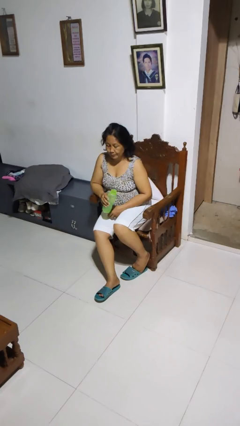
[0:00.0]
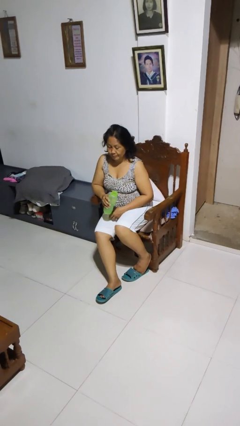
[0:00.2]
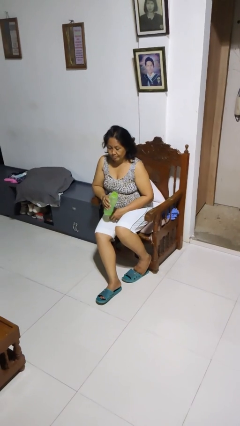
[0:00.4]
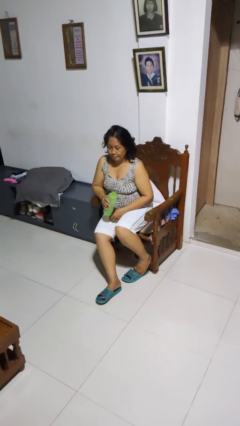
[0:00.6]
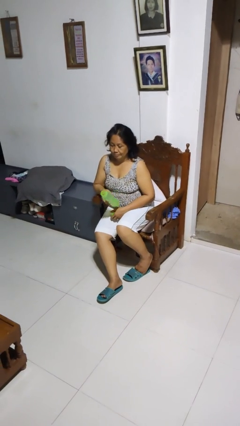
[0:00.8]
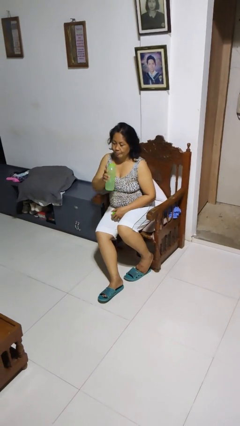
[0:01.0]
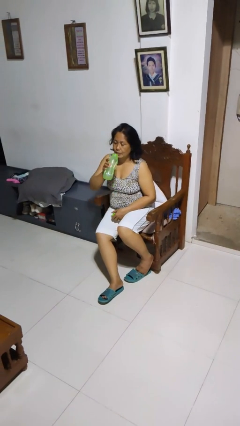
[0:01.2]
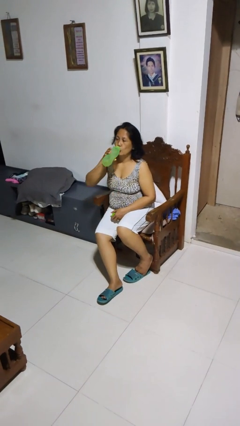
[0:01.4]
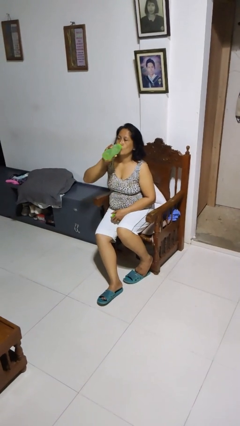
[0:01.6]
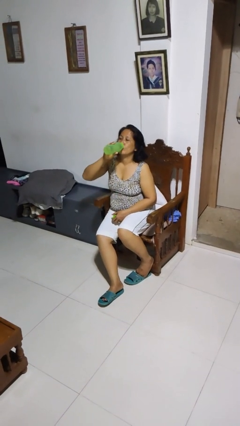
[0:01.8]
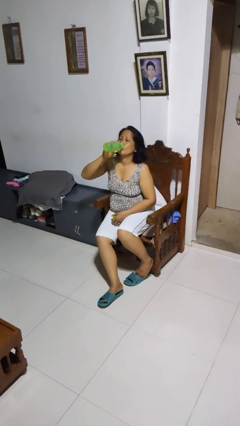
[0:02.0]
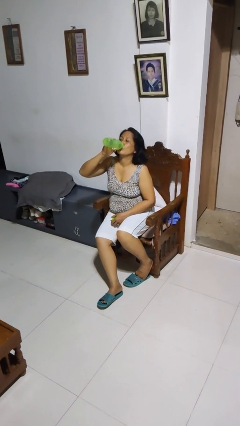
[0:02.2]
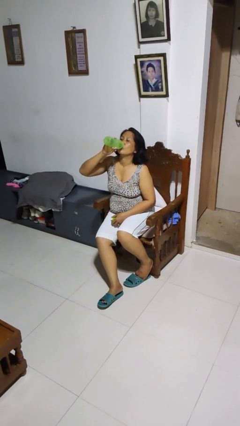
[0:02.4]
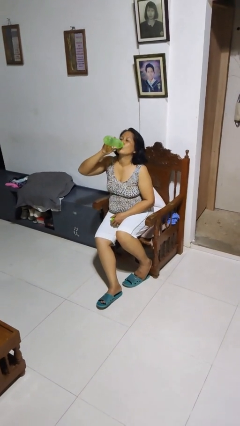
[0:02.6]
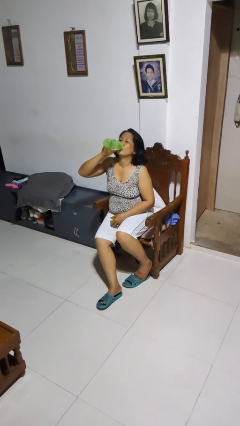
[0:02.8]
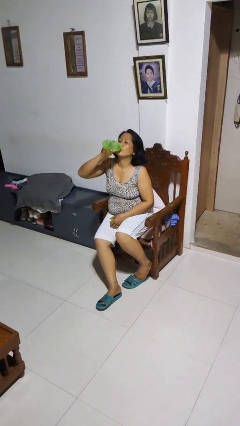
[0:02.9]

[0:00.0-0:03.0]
person drinks from bottle

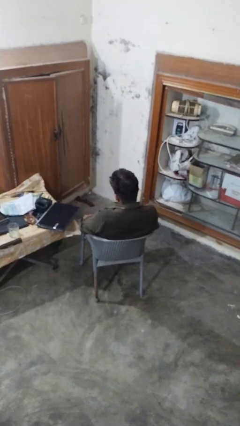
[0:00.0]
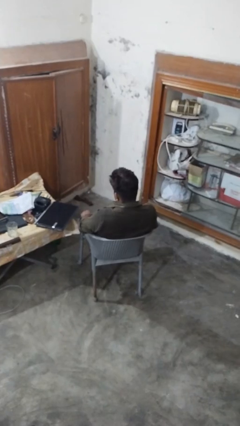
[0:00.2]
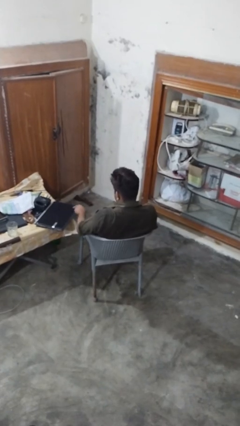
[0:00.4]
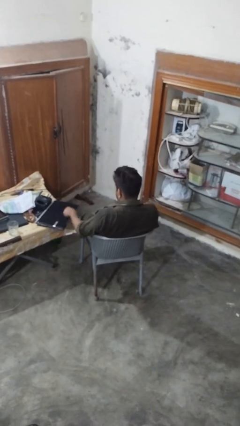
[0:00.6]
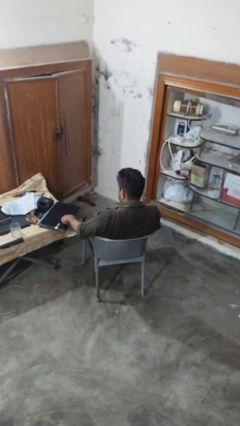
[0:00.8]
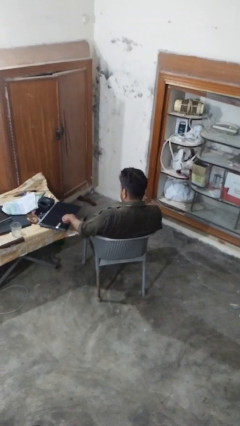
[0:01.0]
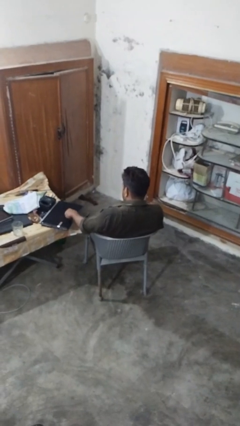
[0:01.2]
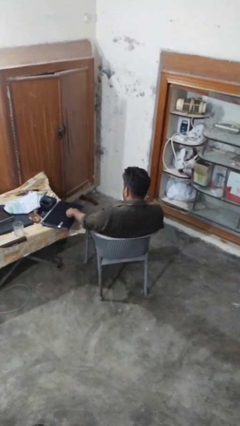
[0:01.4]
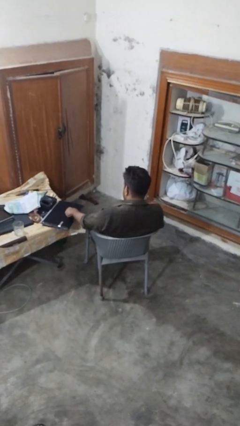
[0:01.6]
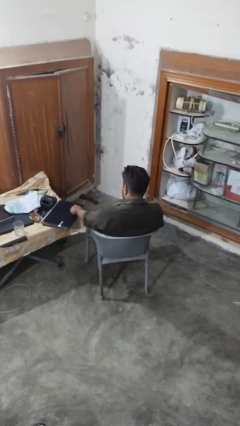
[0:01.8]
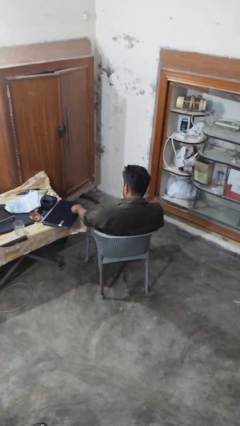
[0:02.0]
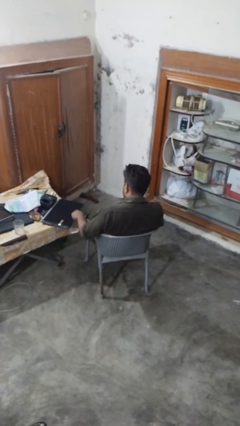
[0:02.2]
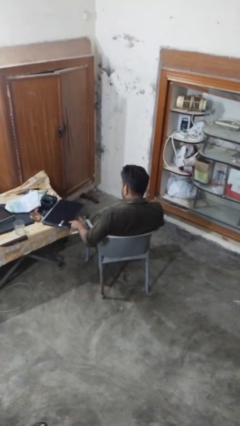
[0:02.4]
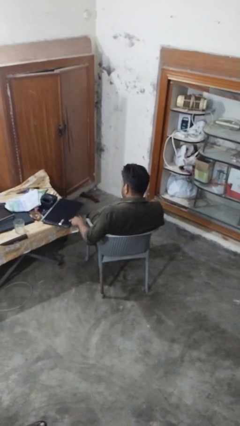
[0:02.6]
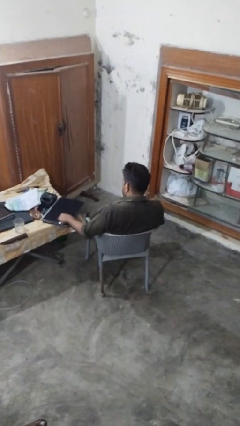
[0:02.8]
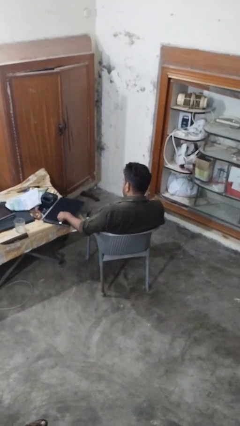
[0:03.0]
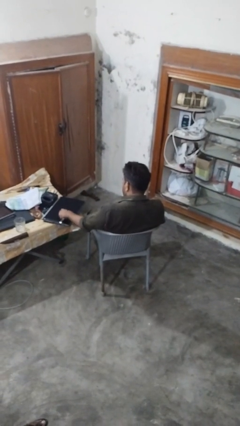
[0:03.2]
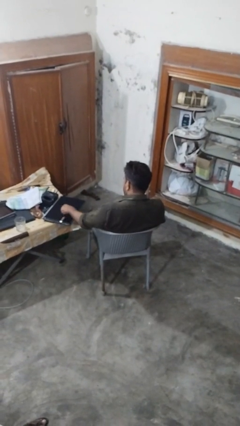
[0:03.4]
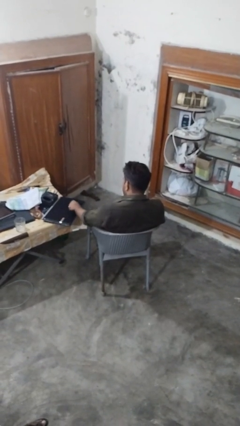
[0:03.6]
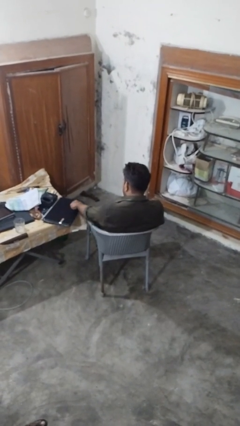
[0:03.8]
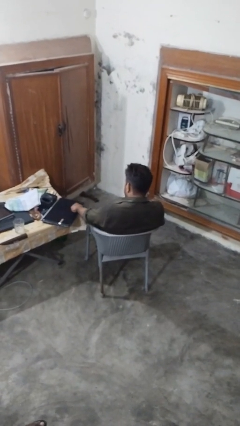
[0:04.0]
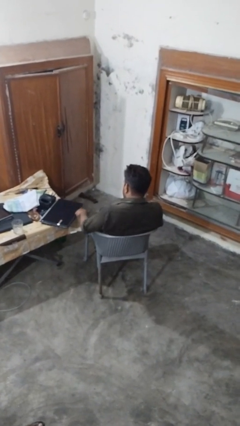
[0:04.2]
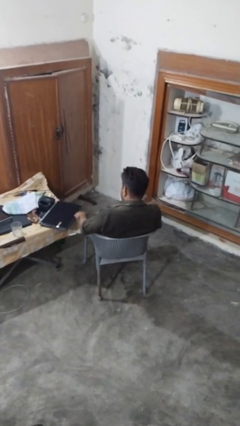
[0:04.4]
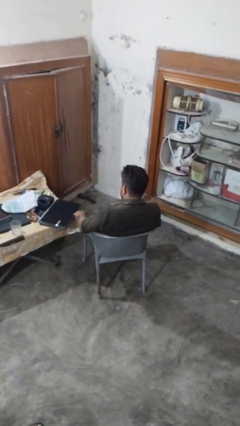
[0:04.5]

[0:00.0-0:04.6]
person taps object with finger

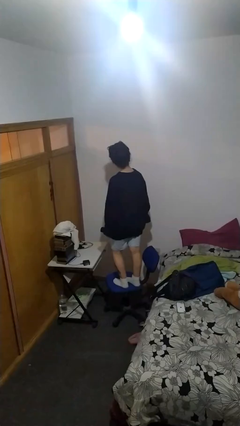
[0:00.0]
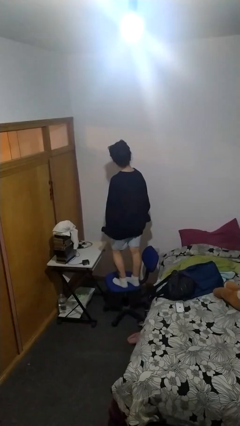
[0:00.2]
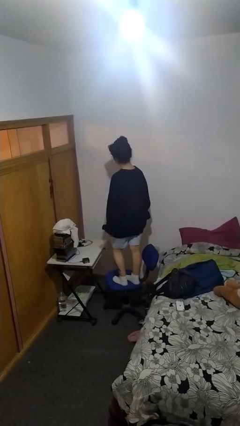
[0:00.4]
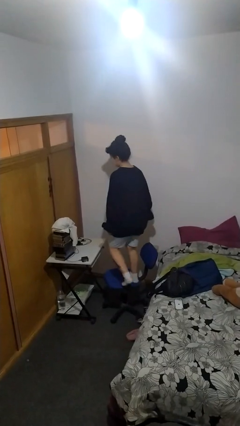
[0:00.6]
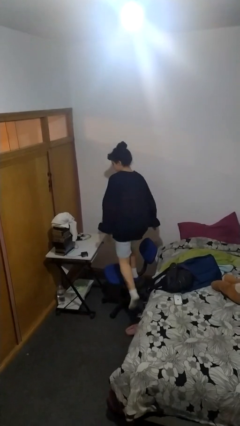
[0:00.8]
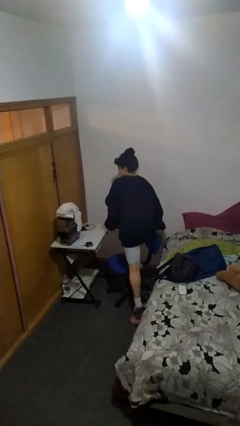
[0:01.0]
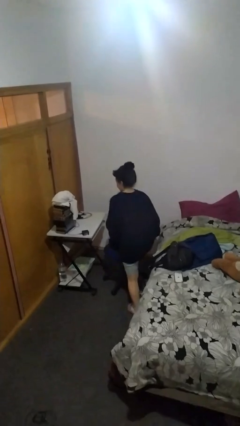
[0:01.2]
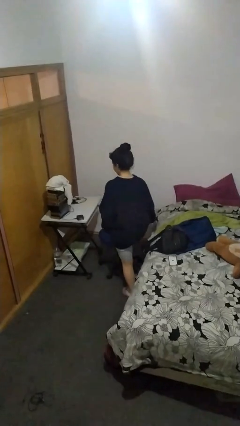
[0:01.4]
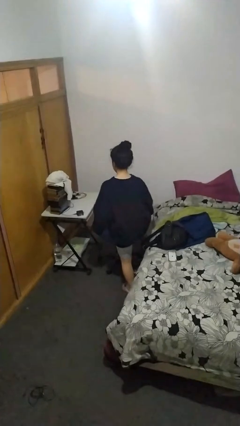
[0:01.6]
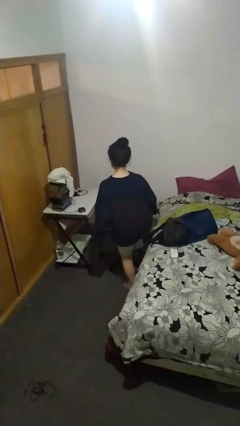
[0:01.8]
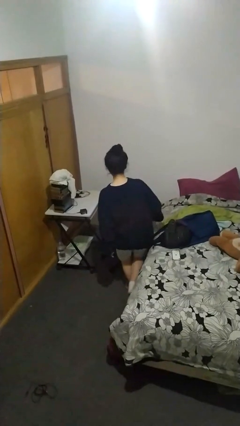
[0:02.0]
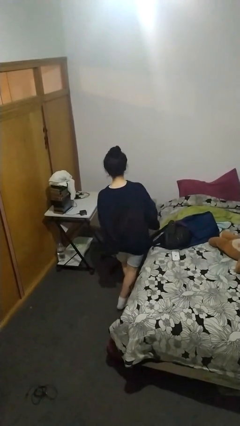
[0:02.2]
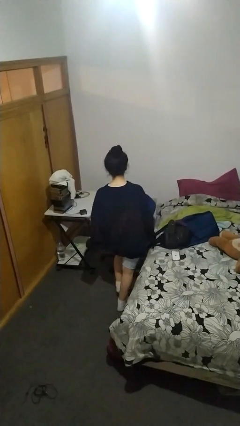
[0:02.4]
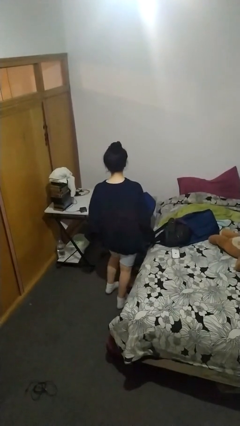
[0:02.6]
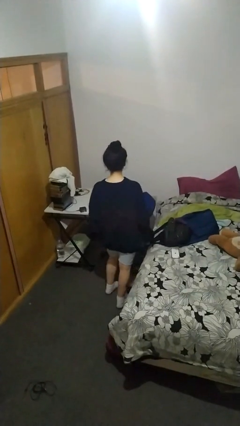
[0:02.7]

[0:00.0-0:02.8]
person climbs off chair

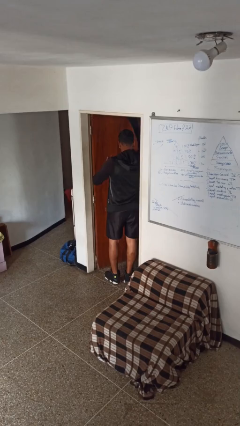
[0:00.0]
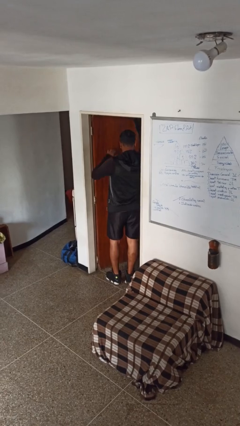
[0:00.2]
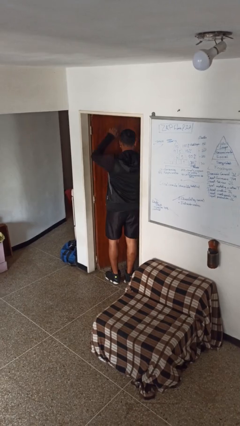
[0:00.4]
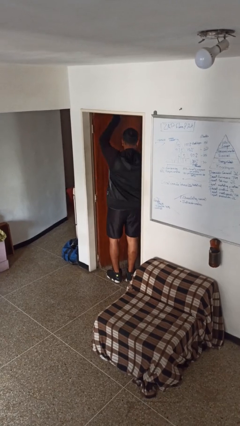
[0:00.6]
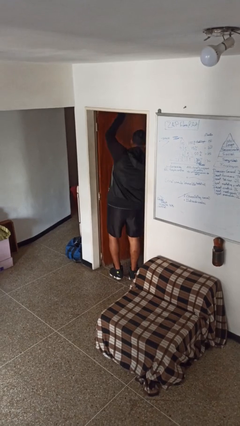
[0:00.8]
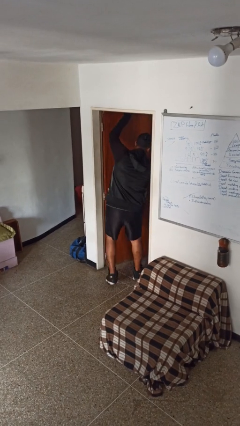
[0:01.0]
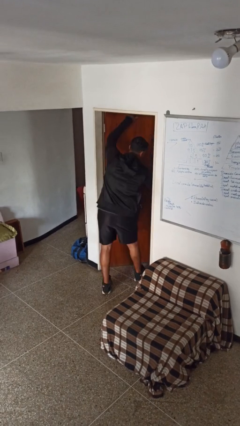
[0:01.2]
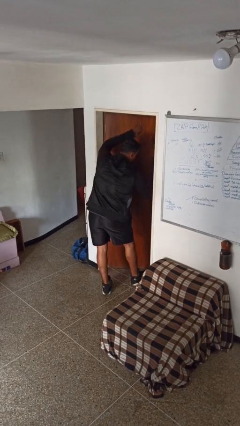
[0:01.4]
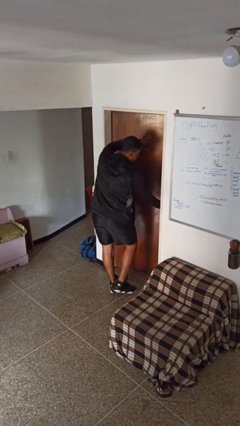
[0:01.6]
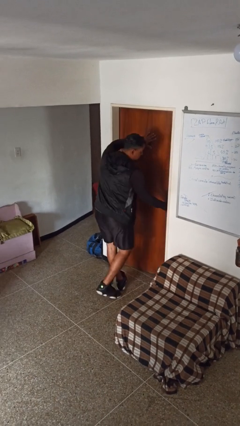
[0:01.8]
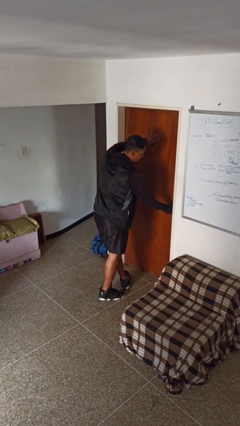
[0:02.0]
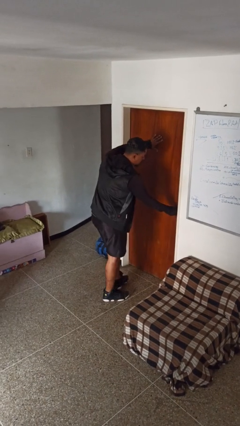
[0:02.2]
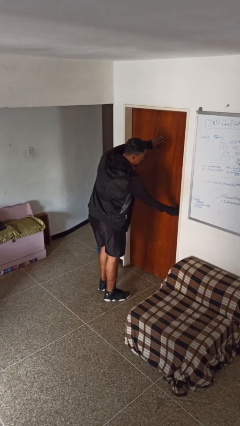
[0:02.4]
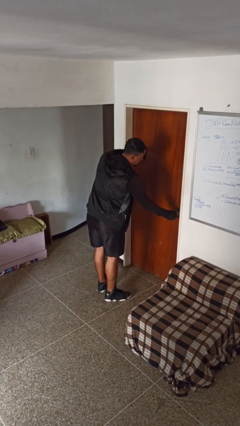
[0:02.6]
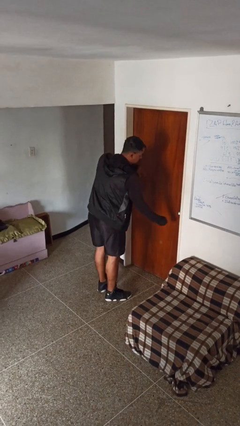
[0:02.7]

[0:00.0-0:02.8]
person closes facility door

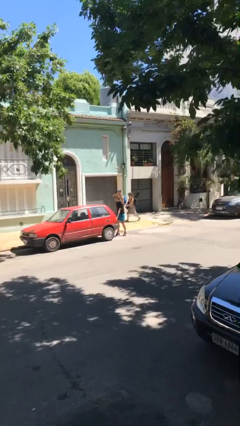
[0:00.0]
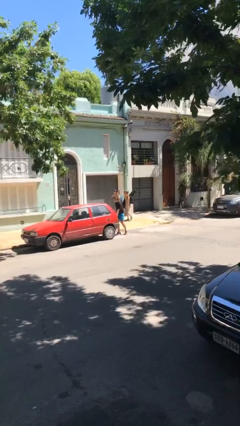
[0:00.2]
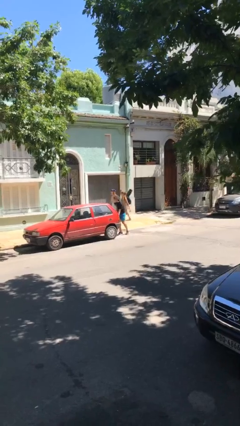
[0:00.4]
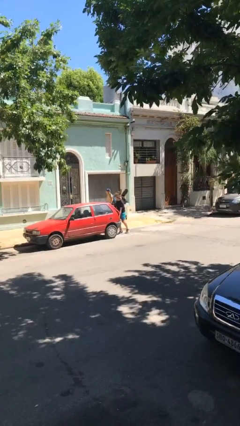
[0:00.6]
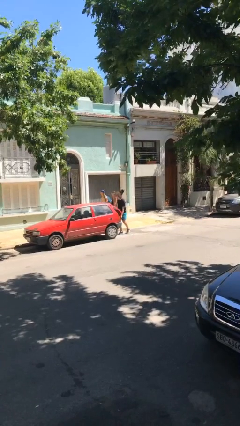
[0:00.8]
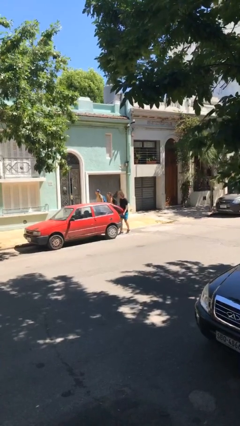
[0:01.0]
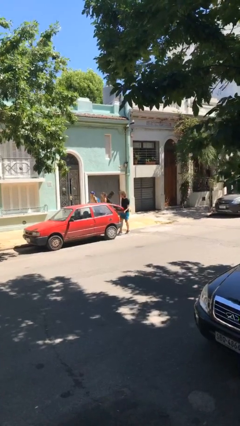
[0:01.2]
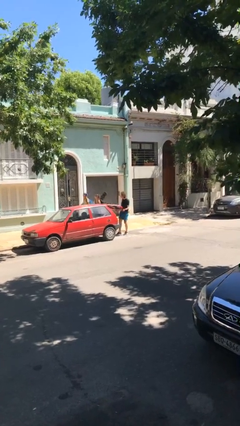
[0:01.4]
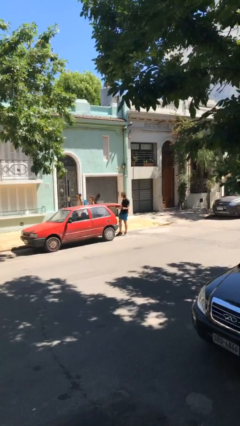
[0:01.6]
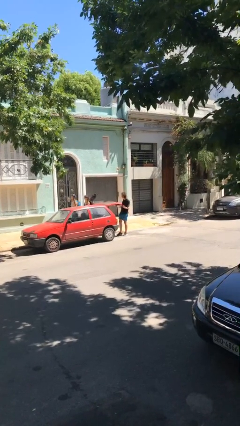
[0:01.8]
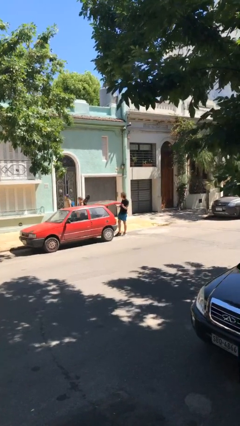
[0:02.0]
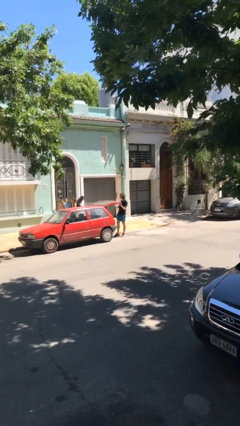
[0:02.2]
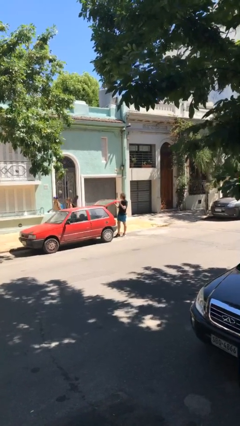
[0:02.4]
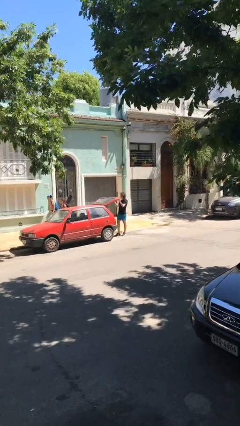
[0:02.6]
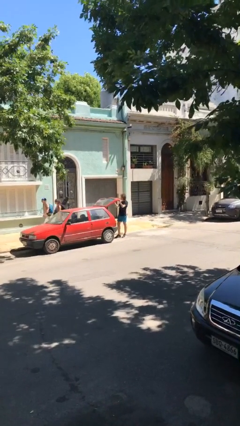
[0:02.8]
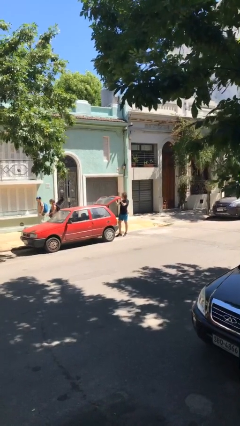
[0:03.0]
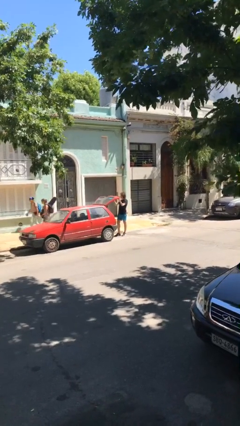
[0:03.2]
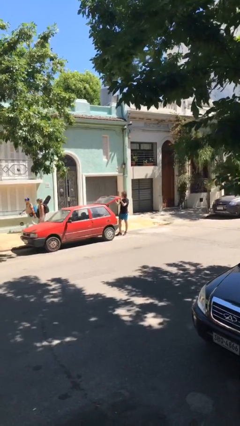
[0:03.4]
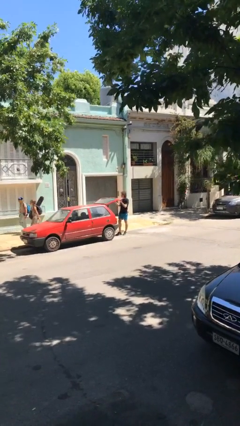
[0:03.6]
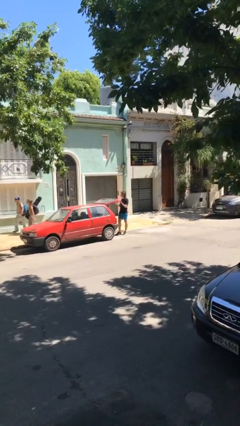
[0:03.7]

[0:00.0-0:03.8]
person opens car trunk

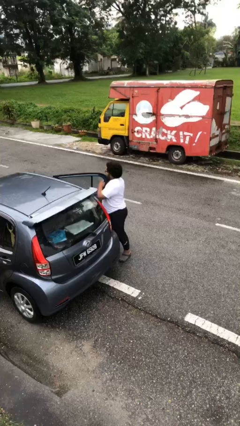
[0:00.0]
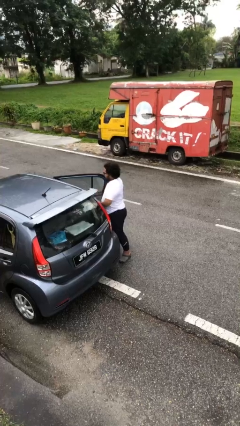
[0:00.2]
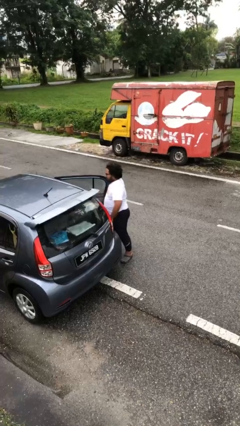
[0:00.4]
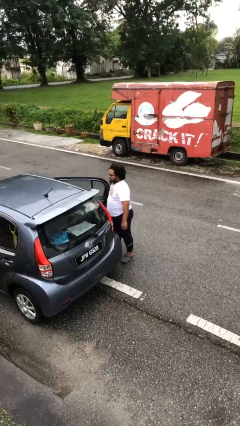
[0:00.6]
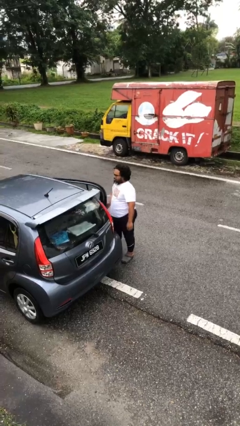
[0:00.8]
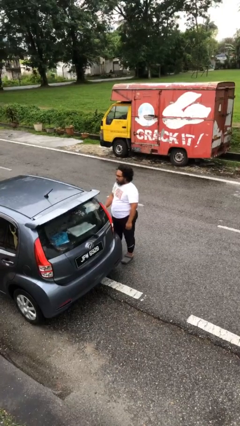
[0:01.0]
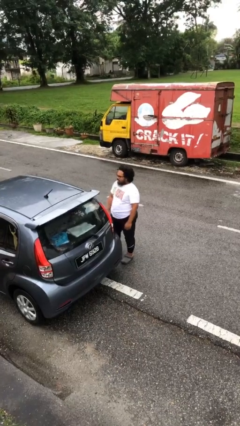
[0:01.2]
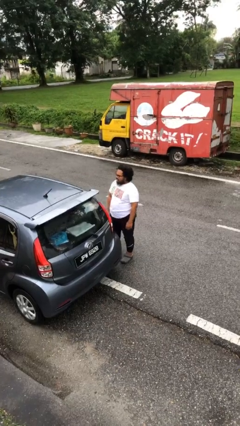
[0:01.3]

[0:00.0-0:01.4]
person closes car door
